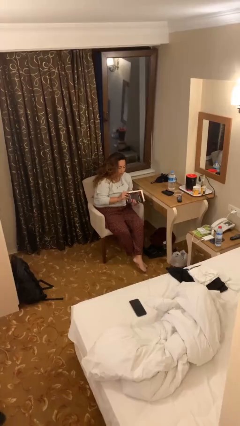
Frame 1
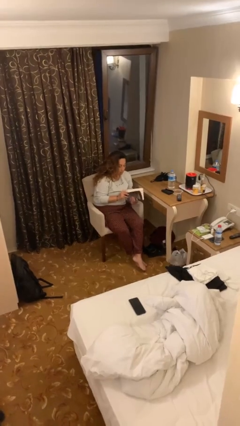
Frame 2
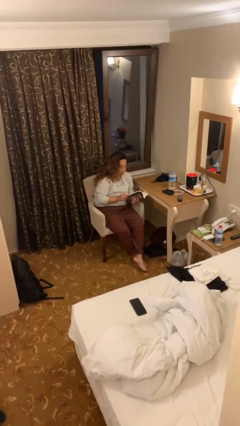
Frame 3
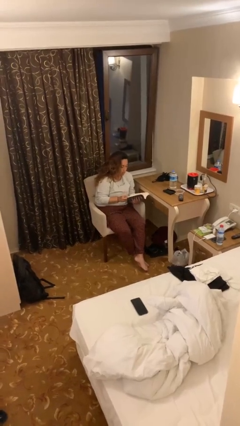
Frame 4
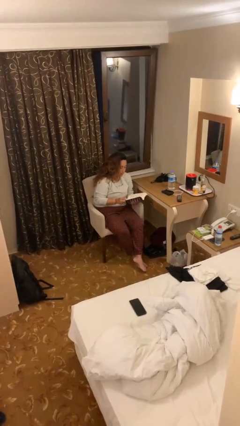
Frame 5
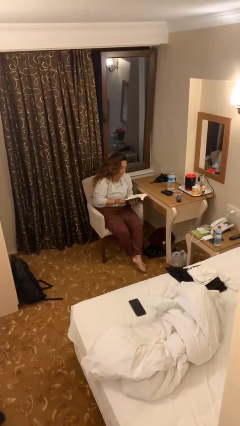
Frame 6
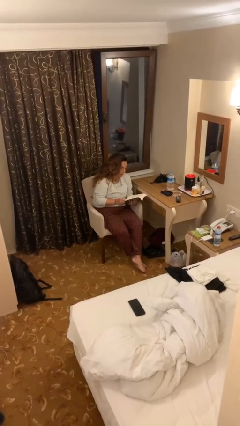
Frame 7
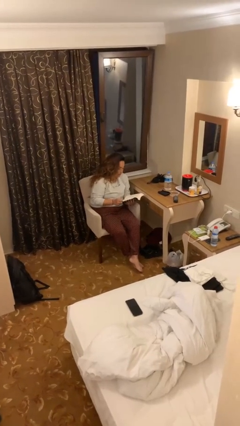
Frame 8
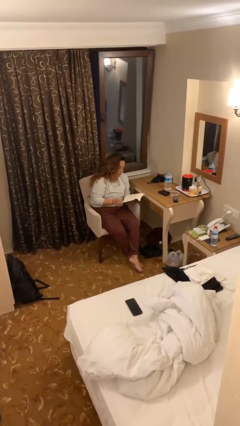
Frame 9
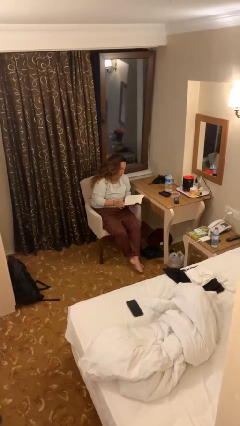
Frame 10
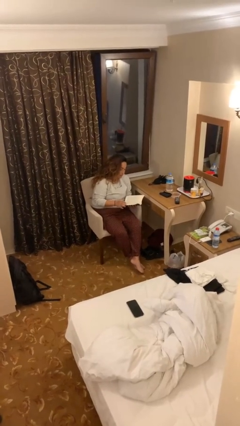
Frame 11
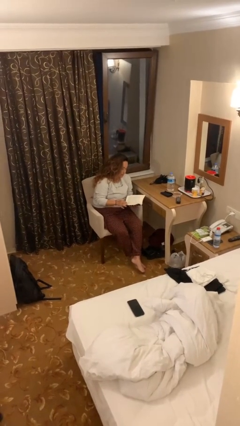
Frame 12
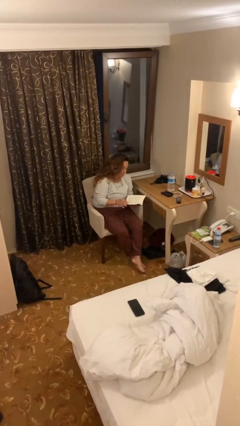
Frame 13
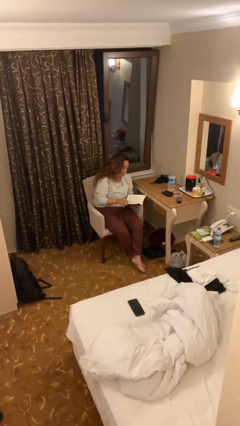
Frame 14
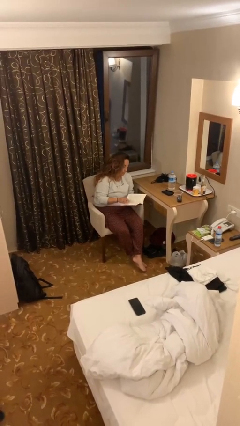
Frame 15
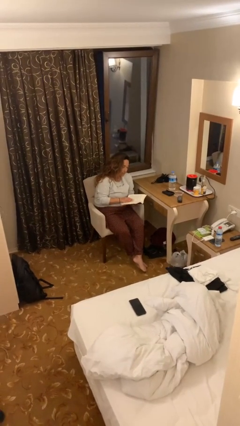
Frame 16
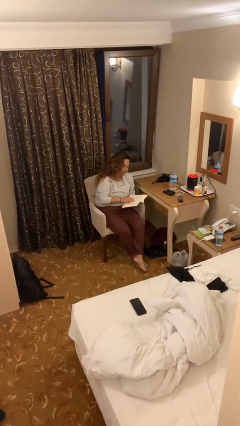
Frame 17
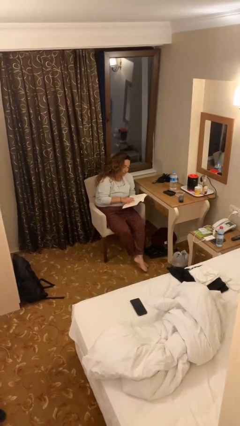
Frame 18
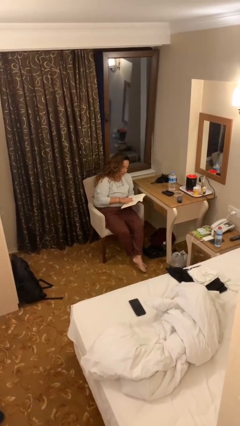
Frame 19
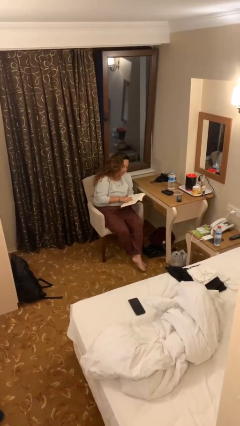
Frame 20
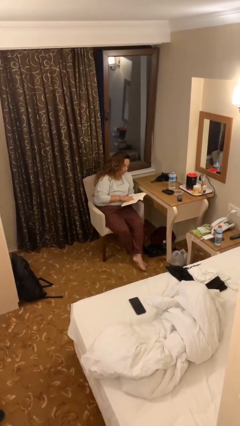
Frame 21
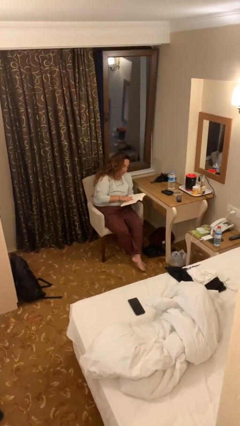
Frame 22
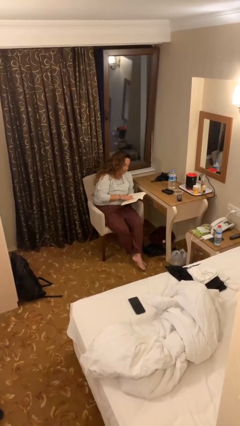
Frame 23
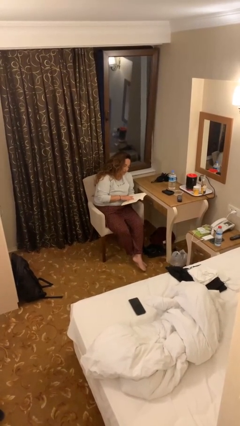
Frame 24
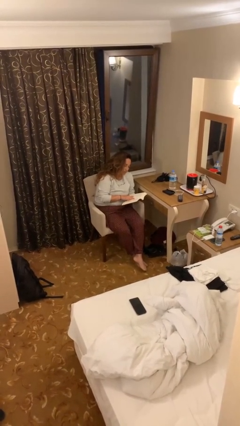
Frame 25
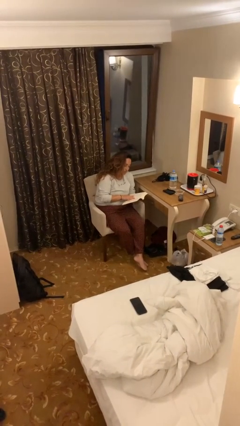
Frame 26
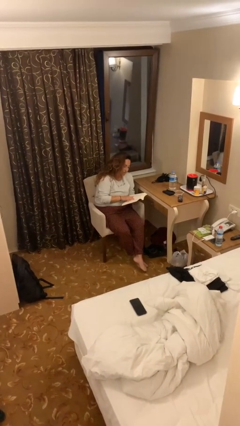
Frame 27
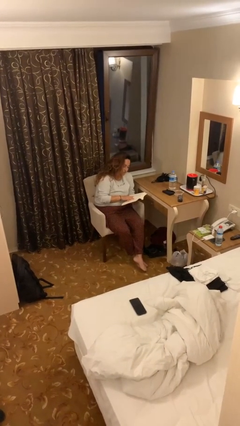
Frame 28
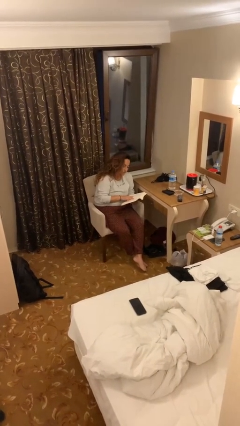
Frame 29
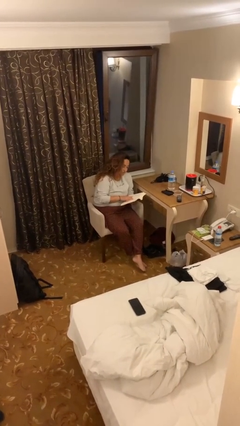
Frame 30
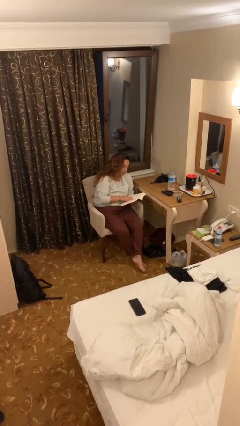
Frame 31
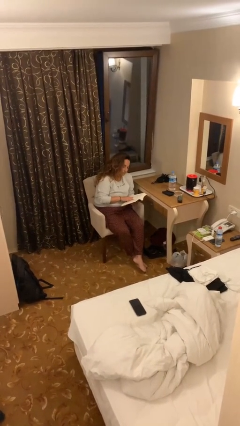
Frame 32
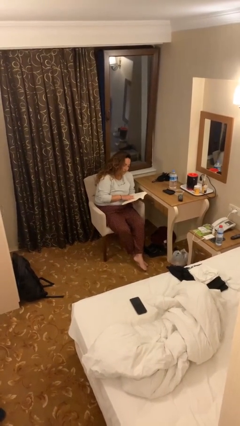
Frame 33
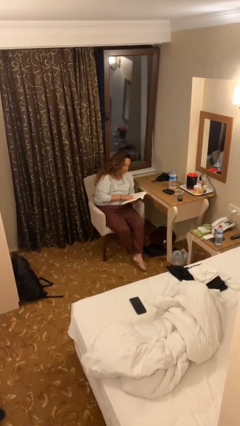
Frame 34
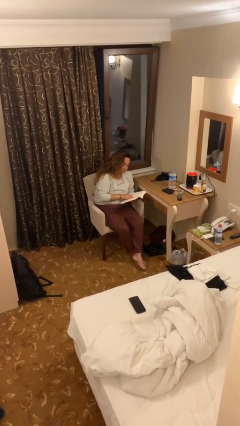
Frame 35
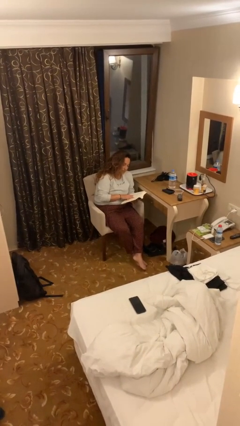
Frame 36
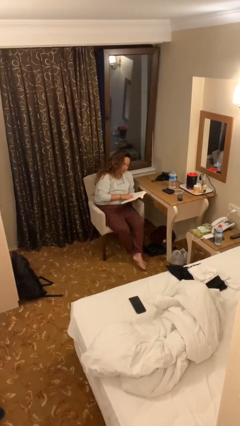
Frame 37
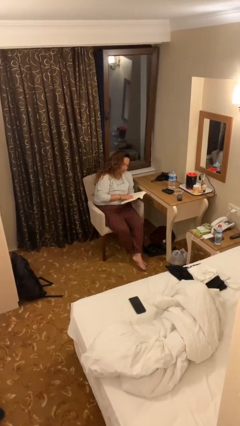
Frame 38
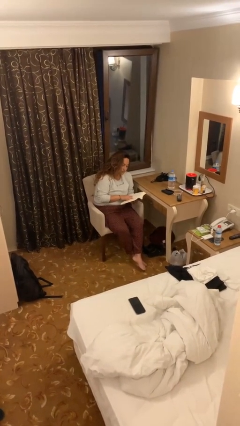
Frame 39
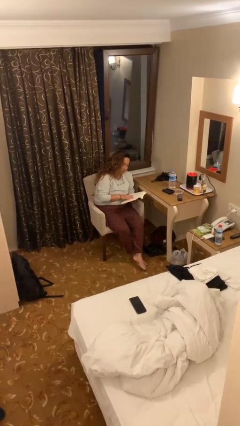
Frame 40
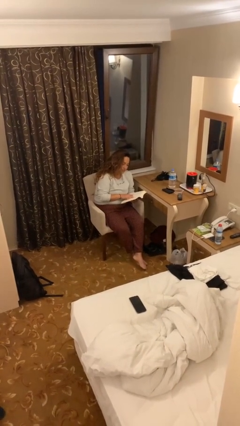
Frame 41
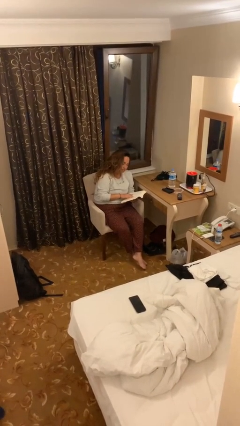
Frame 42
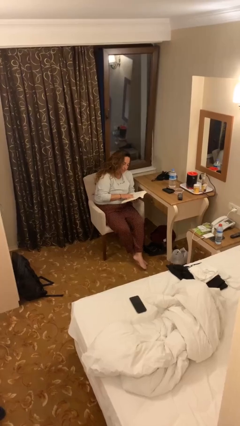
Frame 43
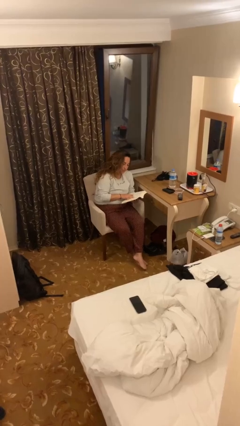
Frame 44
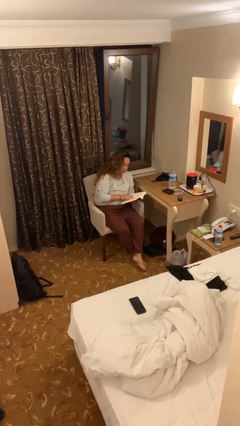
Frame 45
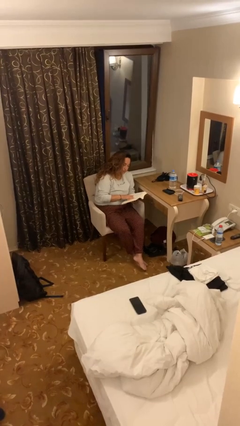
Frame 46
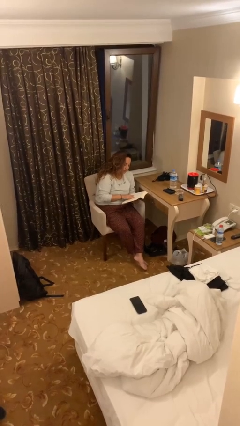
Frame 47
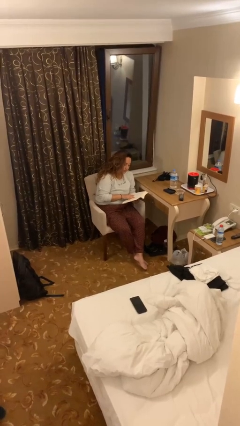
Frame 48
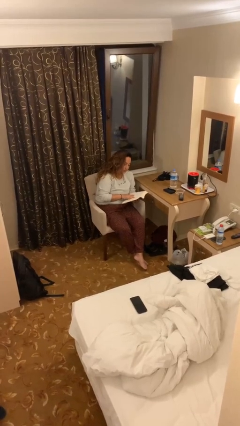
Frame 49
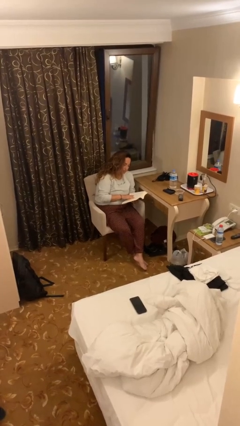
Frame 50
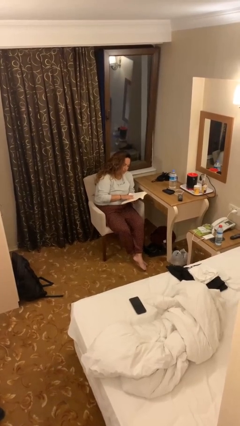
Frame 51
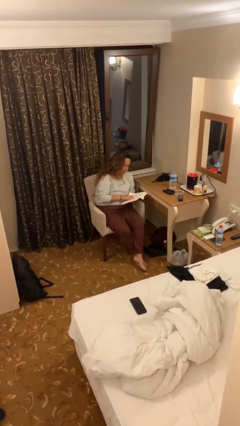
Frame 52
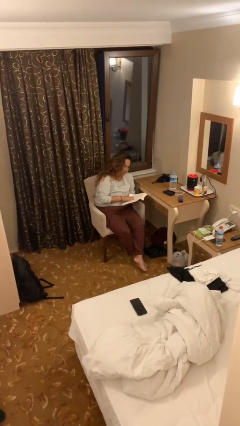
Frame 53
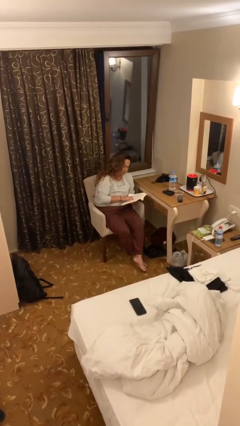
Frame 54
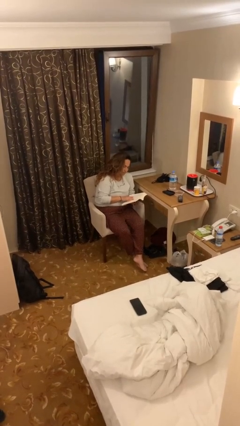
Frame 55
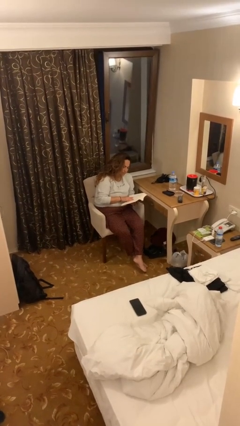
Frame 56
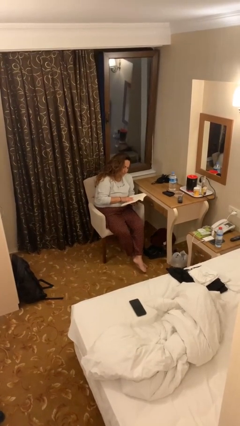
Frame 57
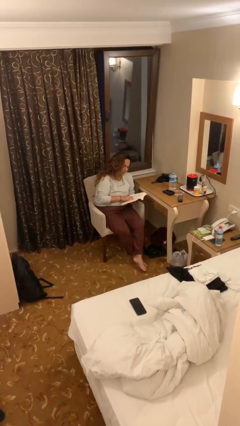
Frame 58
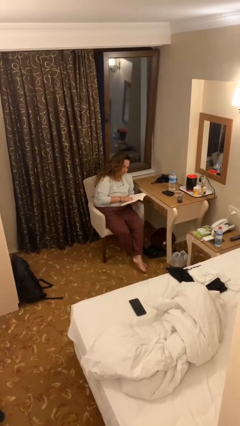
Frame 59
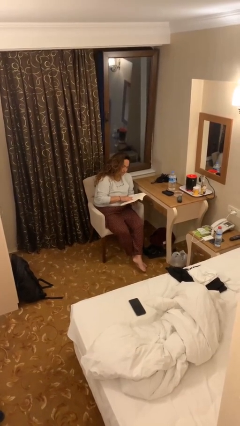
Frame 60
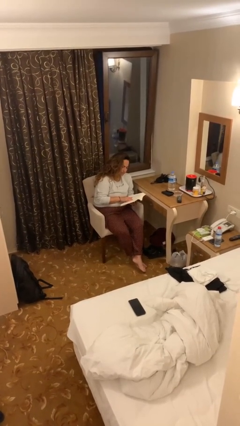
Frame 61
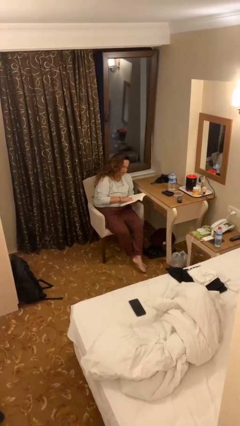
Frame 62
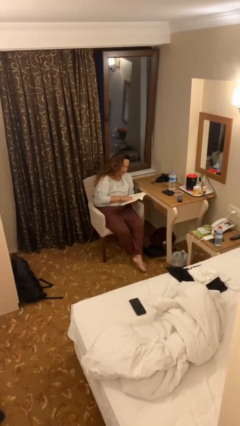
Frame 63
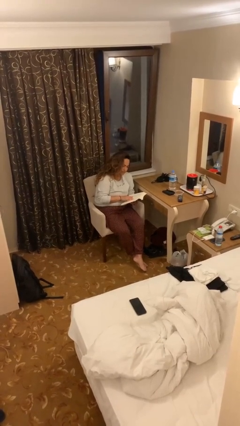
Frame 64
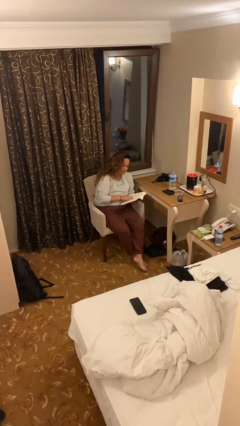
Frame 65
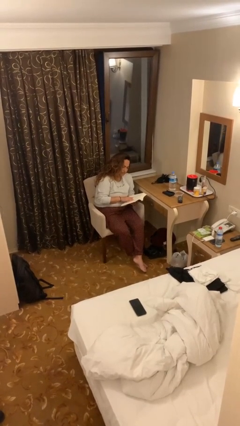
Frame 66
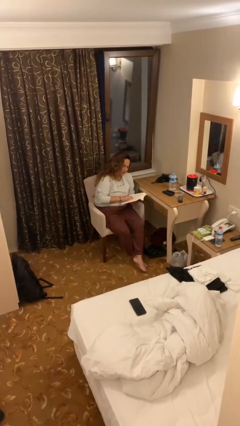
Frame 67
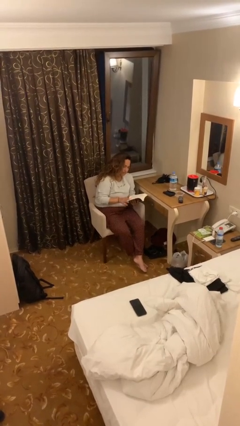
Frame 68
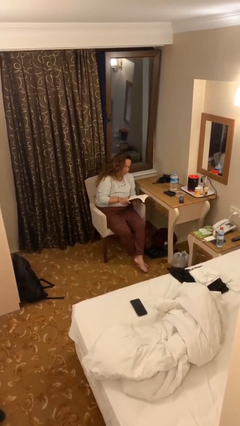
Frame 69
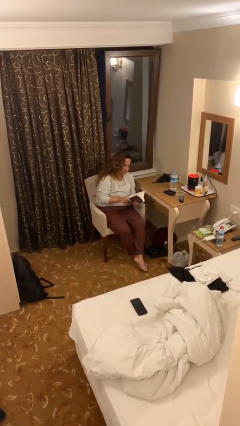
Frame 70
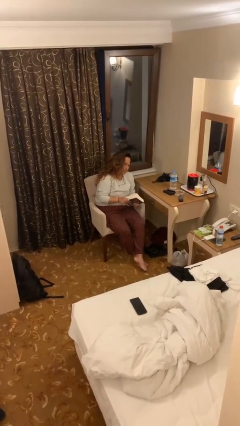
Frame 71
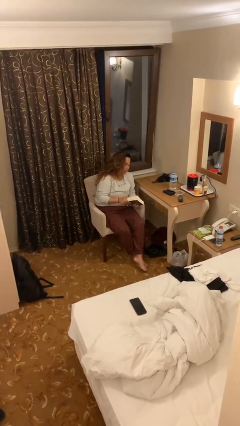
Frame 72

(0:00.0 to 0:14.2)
person reads document

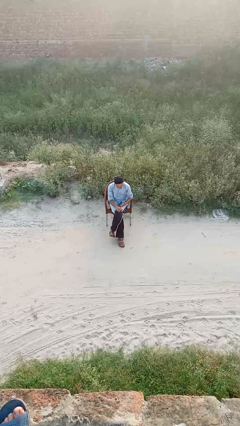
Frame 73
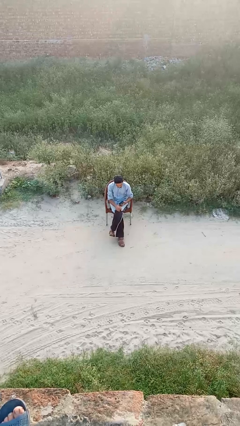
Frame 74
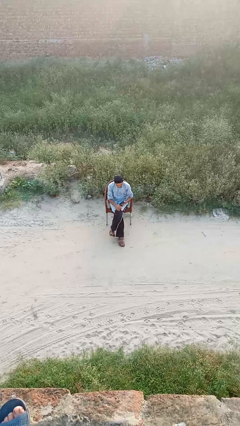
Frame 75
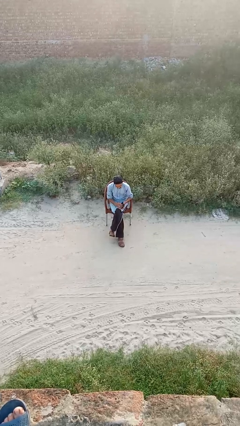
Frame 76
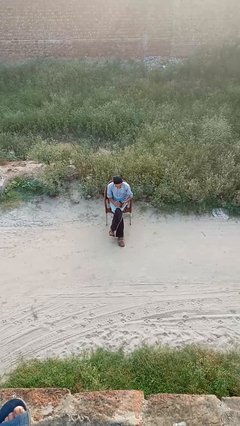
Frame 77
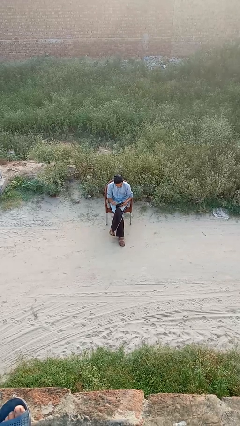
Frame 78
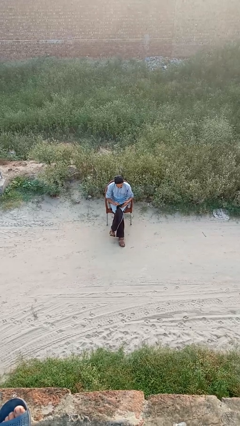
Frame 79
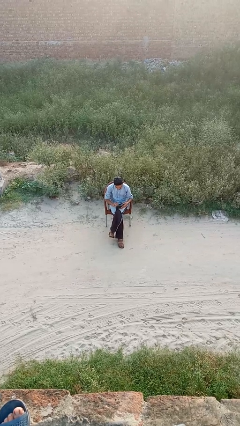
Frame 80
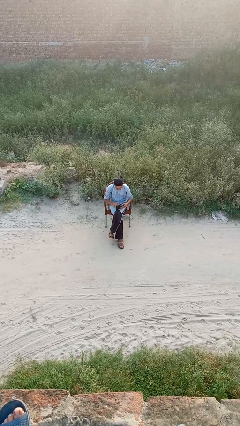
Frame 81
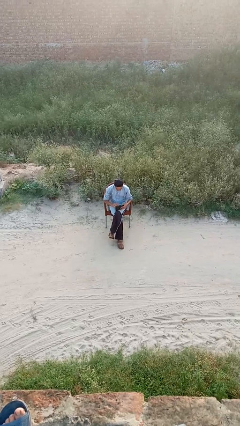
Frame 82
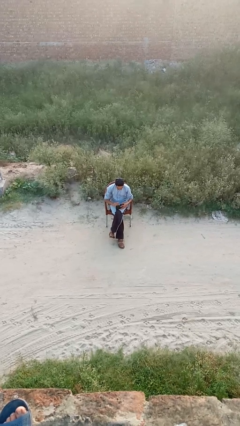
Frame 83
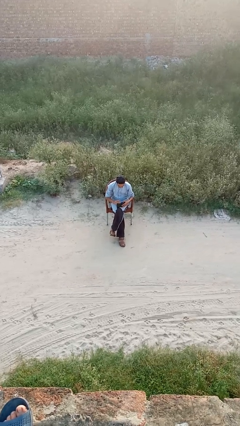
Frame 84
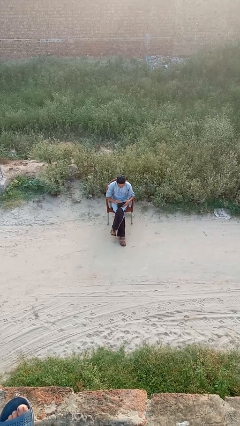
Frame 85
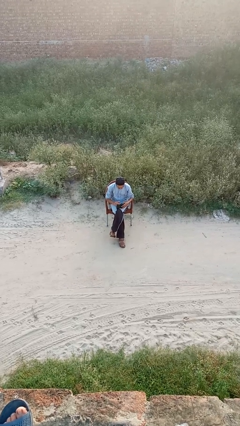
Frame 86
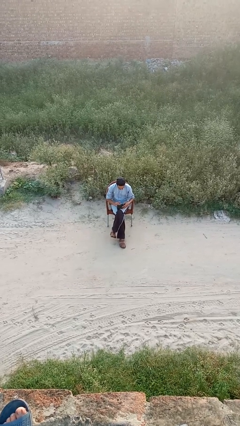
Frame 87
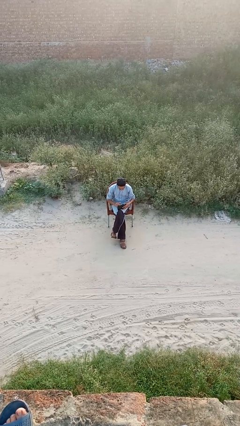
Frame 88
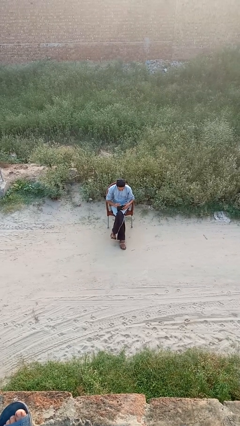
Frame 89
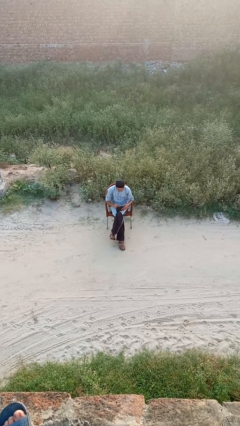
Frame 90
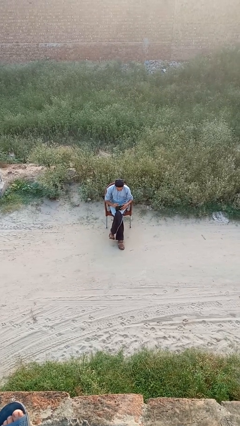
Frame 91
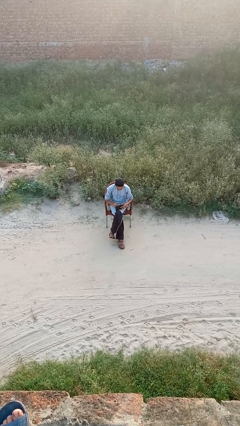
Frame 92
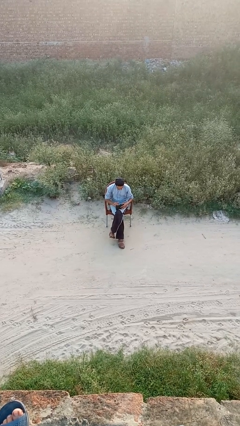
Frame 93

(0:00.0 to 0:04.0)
person searches in purse

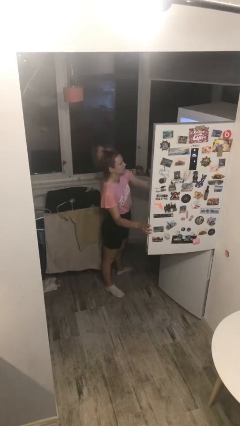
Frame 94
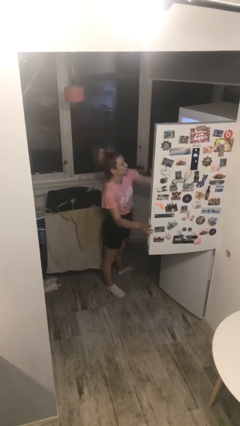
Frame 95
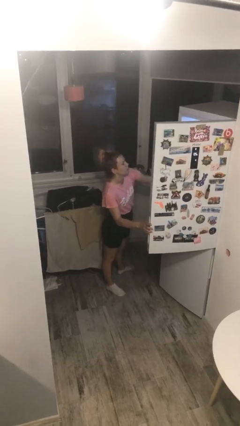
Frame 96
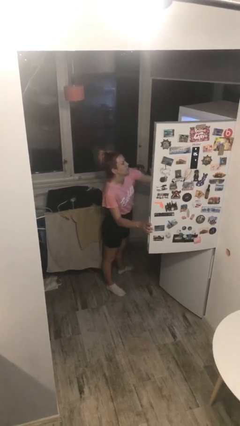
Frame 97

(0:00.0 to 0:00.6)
person puts object into refrigerator
